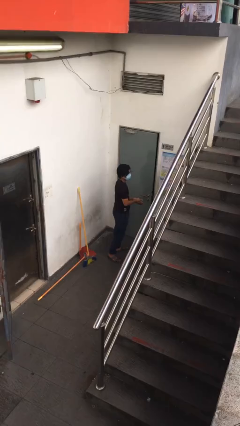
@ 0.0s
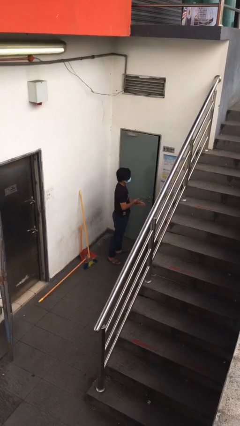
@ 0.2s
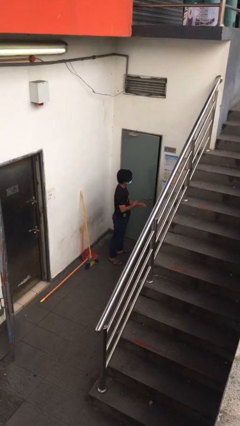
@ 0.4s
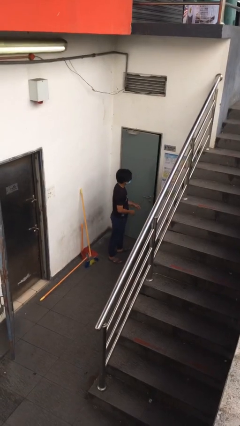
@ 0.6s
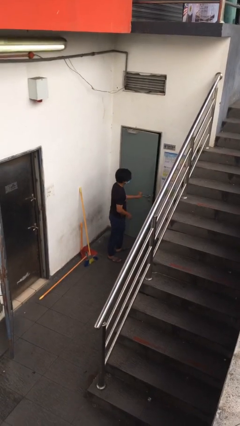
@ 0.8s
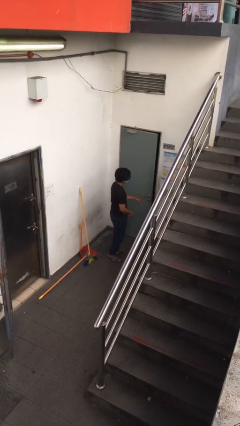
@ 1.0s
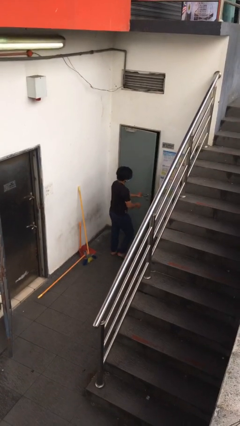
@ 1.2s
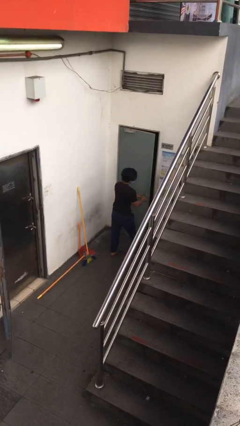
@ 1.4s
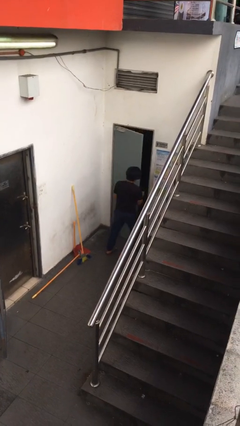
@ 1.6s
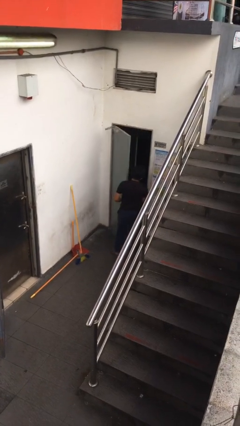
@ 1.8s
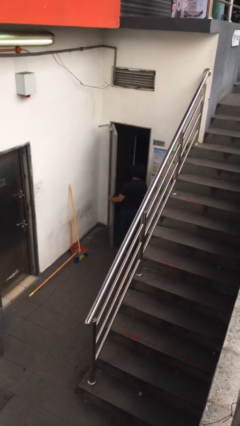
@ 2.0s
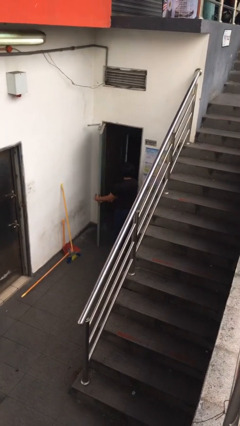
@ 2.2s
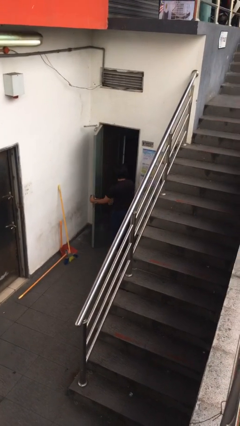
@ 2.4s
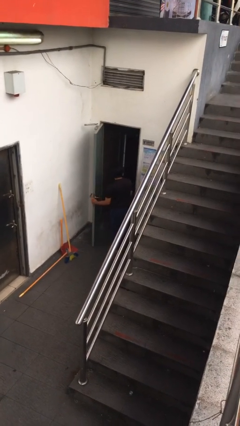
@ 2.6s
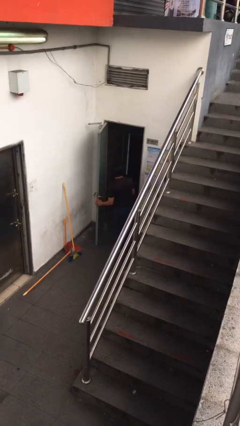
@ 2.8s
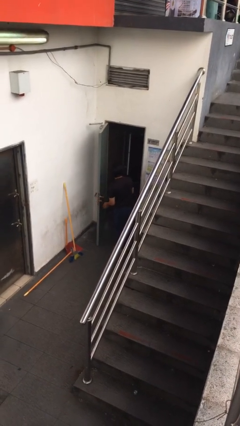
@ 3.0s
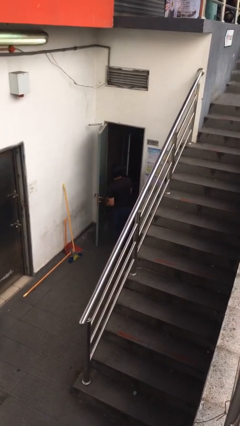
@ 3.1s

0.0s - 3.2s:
person opens facility door

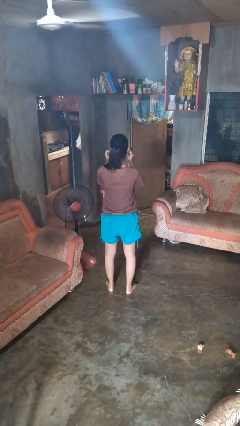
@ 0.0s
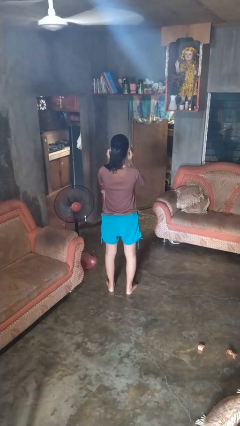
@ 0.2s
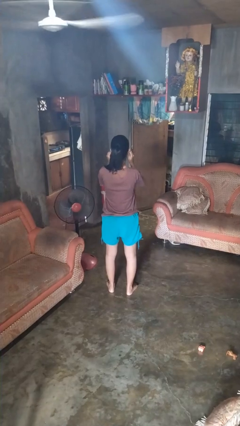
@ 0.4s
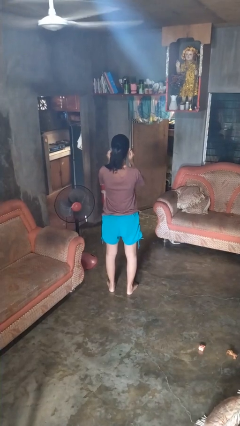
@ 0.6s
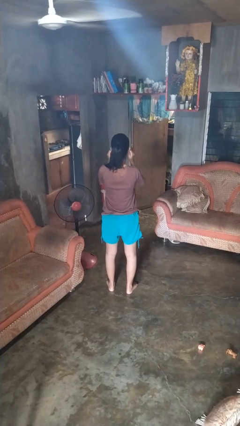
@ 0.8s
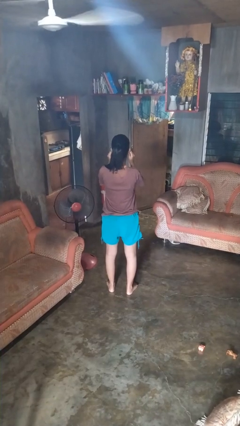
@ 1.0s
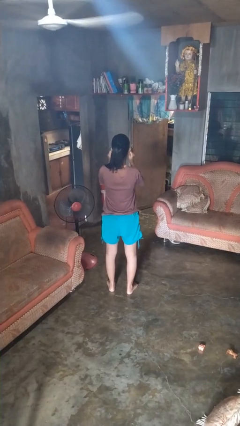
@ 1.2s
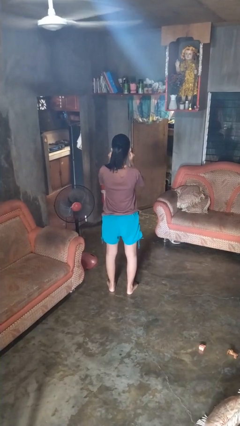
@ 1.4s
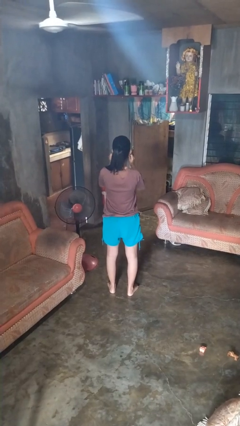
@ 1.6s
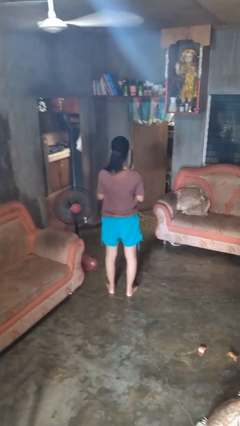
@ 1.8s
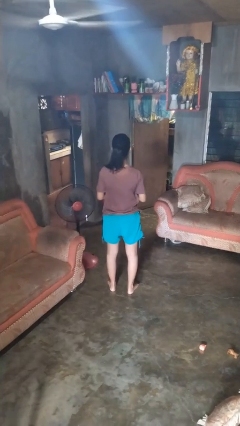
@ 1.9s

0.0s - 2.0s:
person touches earlobe

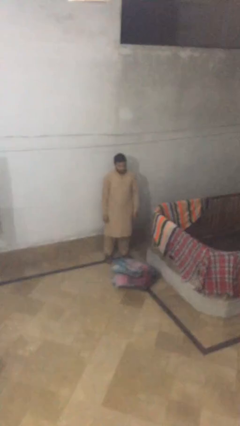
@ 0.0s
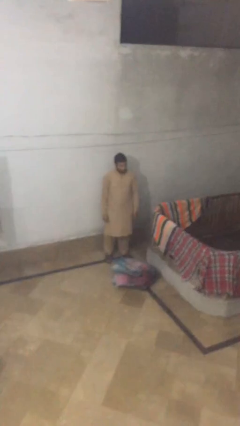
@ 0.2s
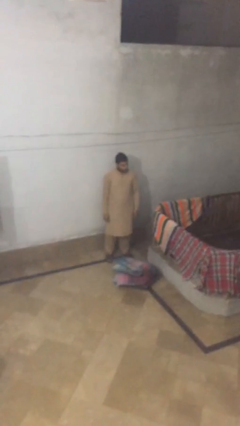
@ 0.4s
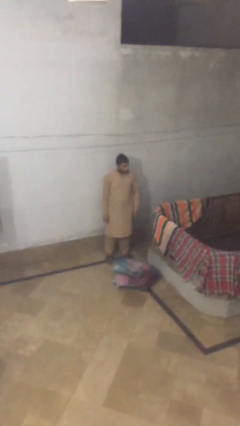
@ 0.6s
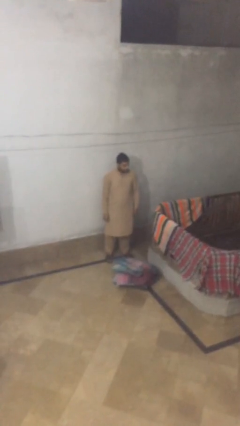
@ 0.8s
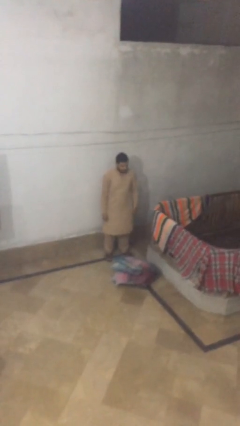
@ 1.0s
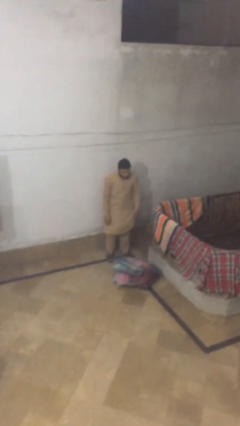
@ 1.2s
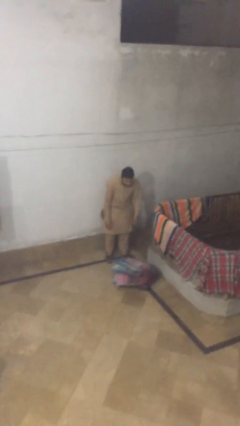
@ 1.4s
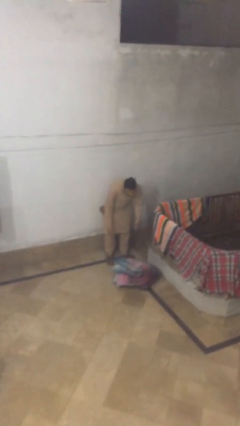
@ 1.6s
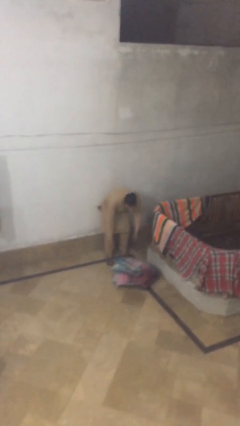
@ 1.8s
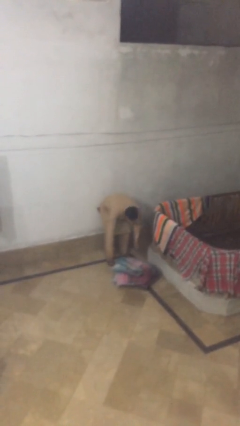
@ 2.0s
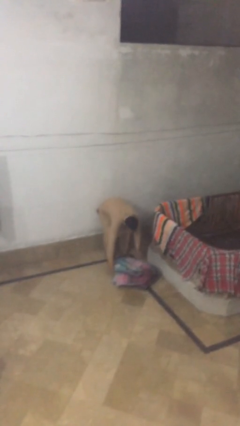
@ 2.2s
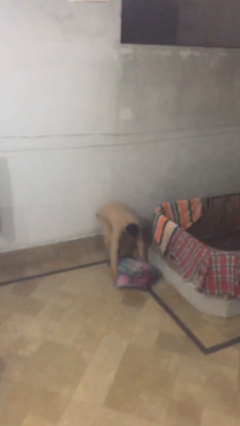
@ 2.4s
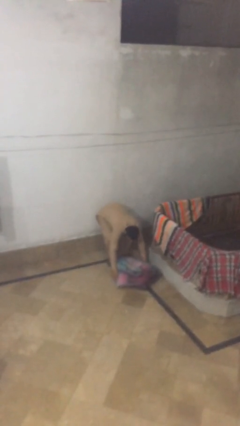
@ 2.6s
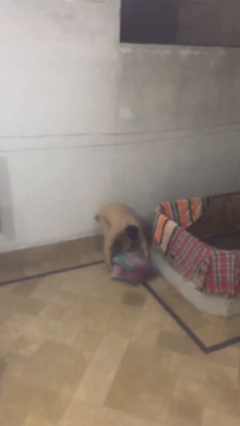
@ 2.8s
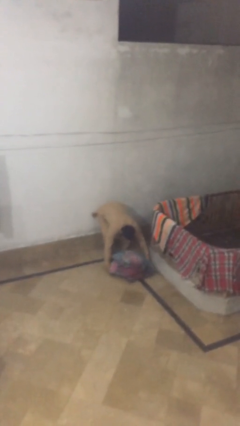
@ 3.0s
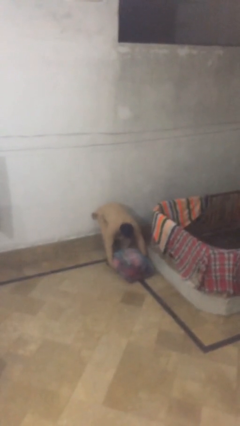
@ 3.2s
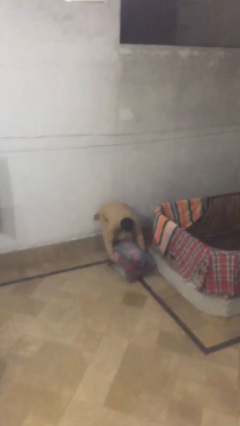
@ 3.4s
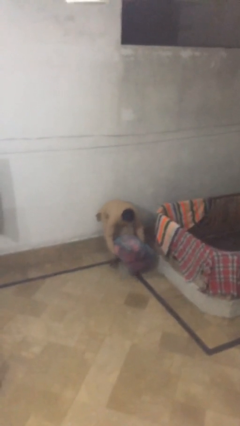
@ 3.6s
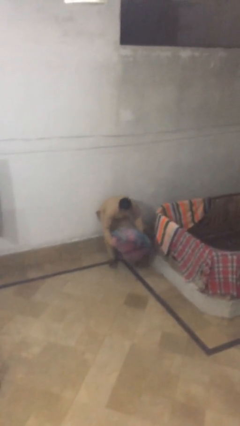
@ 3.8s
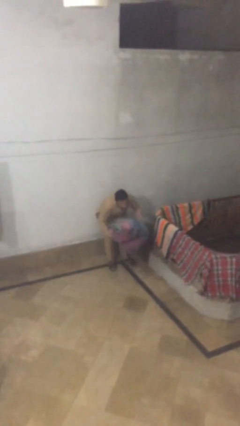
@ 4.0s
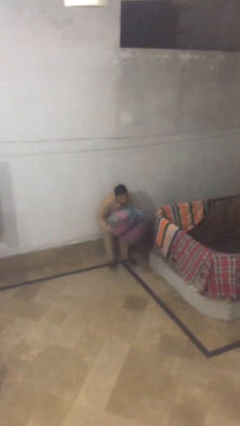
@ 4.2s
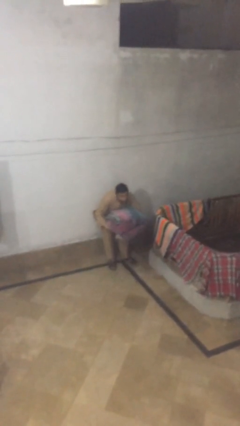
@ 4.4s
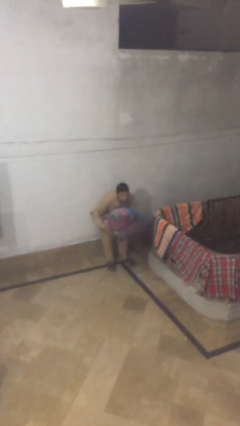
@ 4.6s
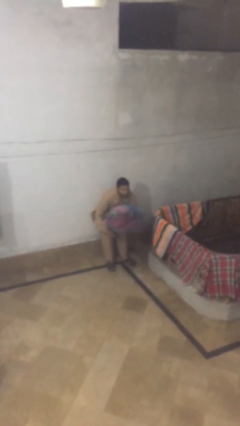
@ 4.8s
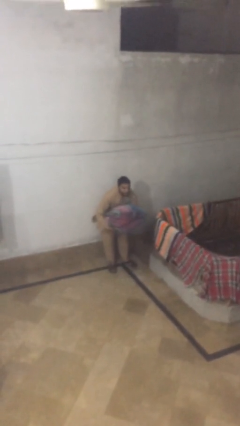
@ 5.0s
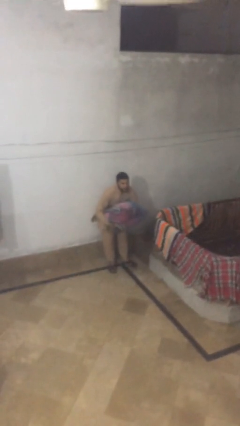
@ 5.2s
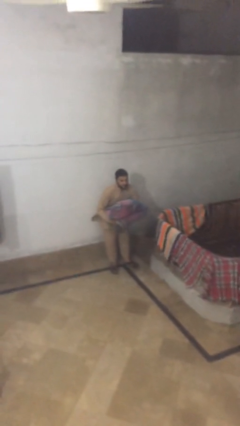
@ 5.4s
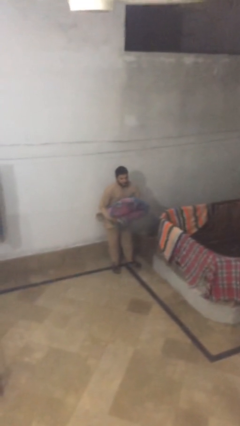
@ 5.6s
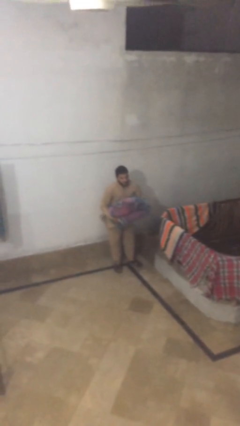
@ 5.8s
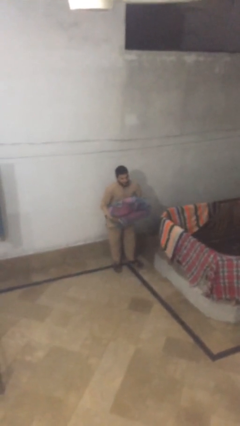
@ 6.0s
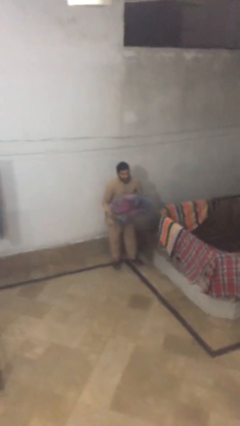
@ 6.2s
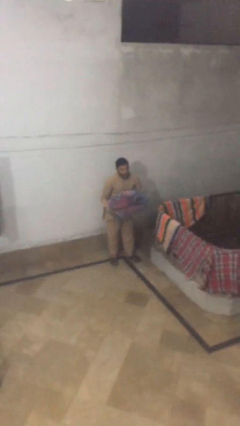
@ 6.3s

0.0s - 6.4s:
person picks up object from floor

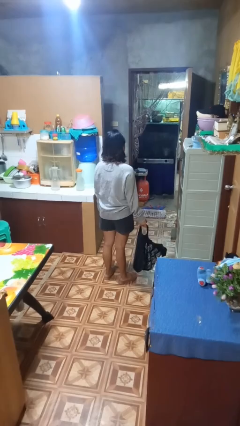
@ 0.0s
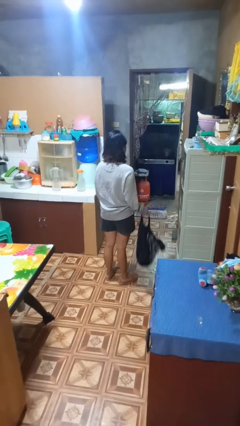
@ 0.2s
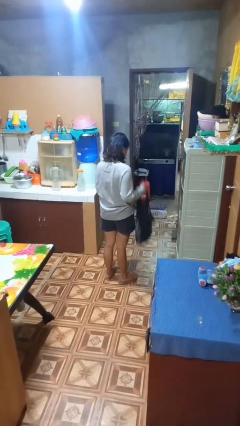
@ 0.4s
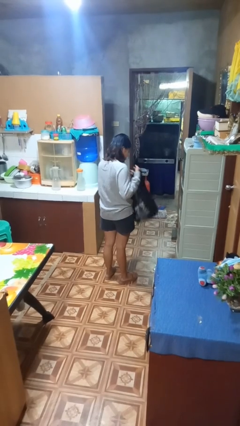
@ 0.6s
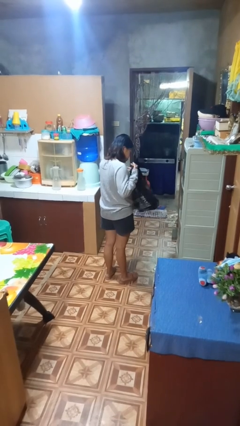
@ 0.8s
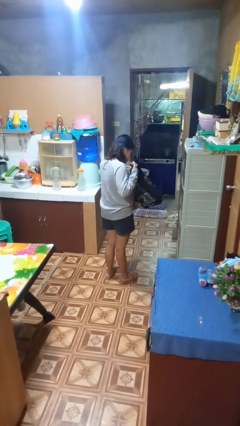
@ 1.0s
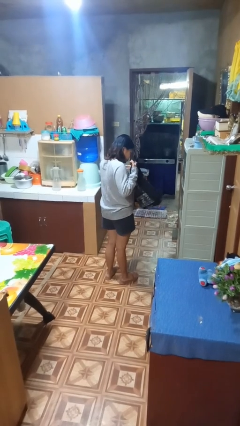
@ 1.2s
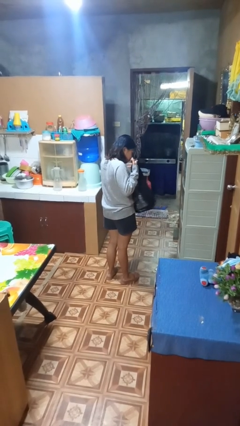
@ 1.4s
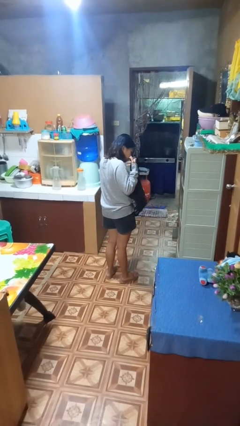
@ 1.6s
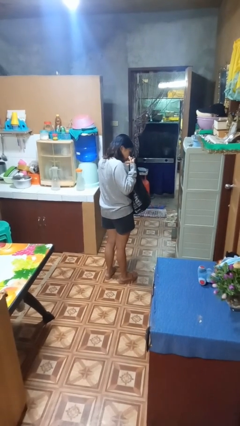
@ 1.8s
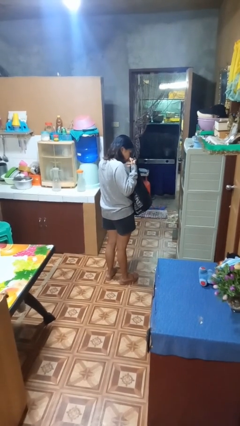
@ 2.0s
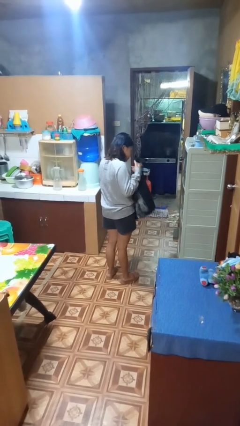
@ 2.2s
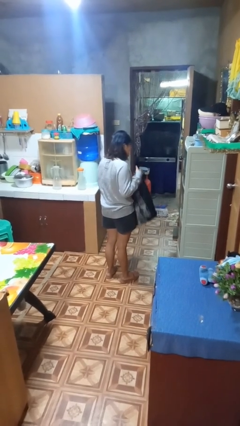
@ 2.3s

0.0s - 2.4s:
person searches in bag

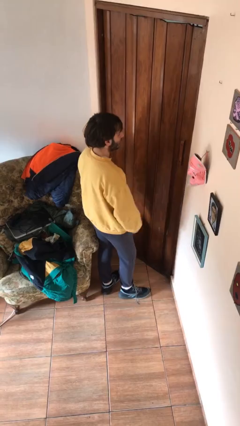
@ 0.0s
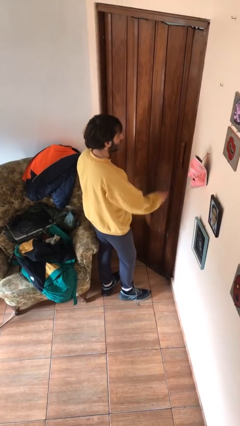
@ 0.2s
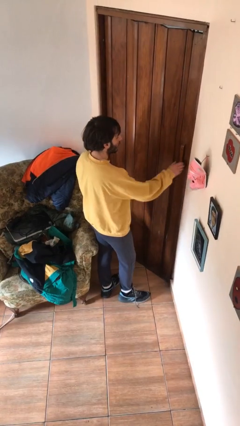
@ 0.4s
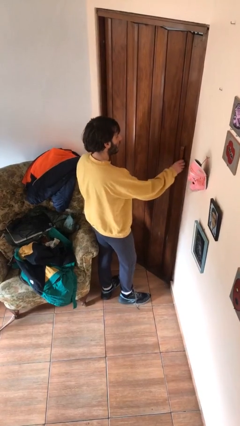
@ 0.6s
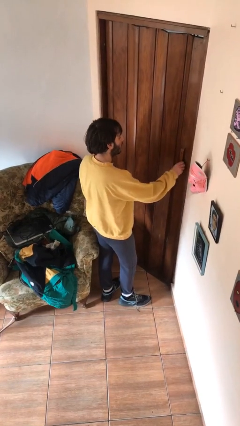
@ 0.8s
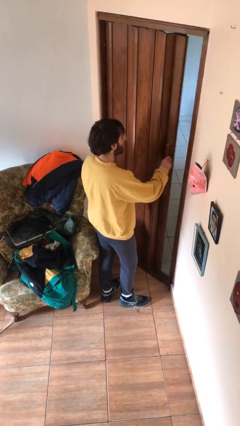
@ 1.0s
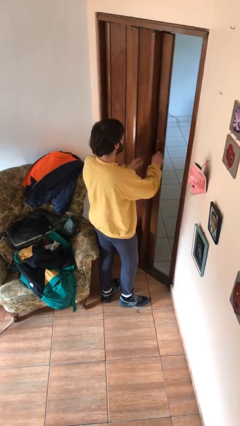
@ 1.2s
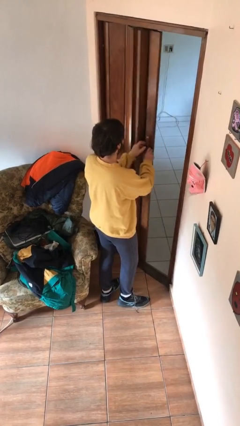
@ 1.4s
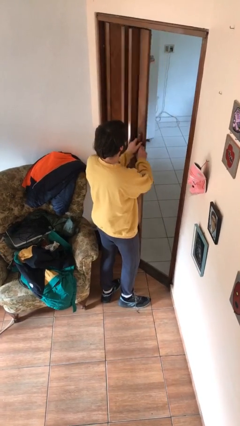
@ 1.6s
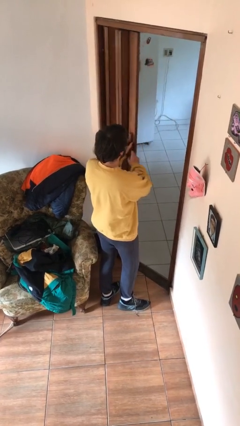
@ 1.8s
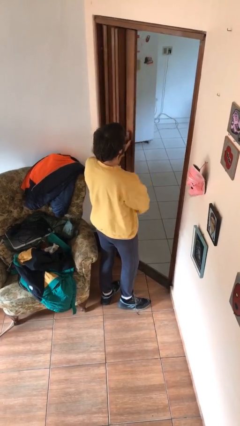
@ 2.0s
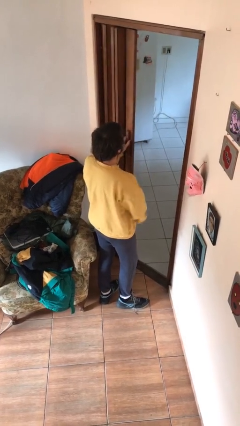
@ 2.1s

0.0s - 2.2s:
person opens sliding door

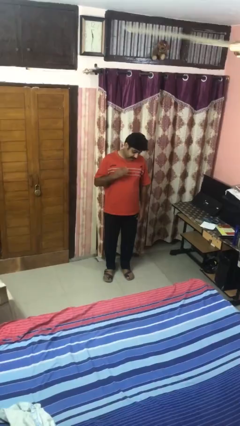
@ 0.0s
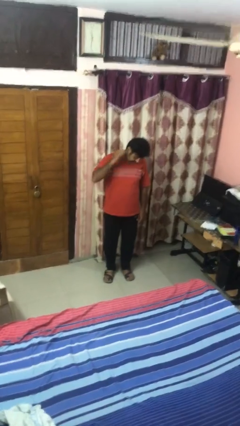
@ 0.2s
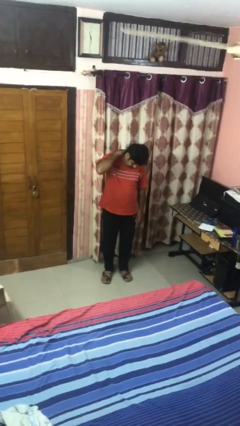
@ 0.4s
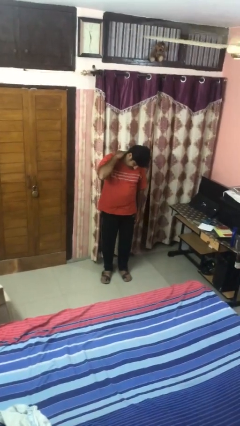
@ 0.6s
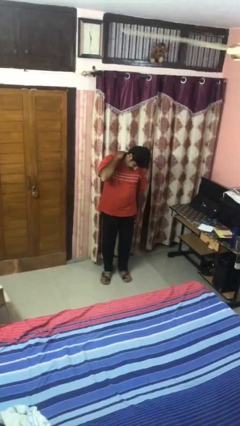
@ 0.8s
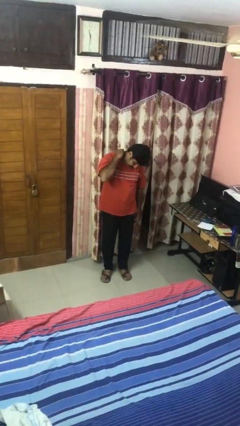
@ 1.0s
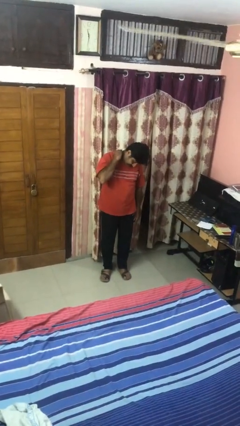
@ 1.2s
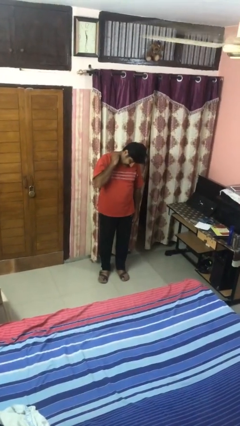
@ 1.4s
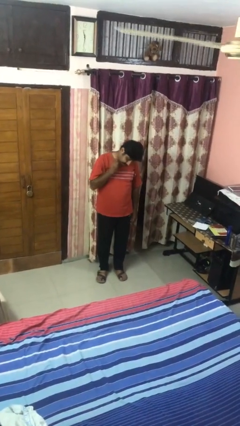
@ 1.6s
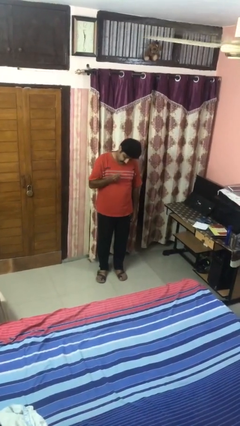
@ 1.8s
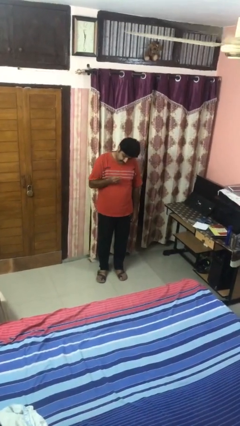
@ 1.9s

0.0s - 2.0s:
person swats bug
